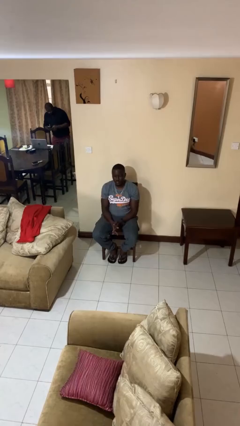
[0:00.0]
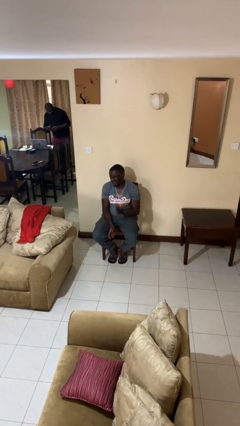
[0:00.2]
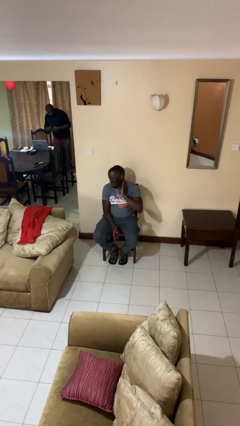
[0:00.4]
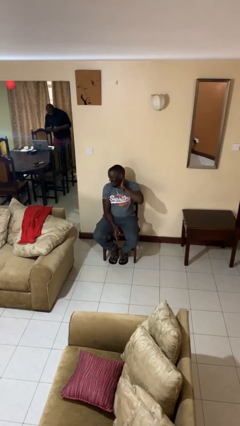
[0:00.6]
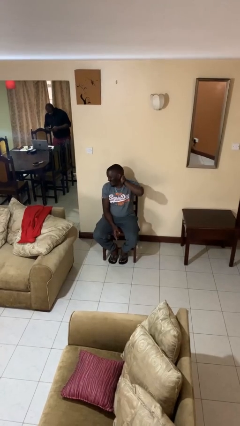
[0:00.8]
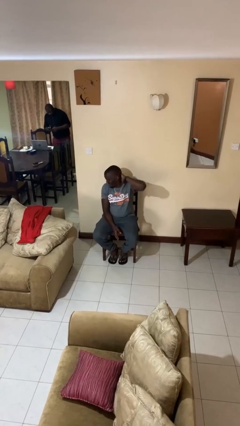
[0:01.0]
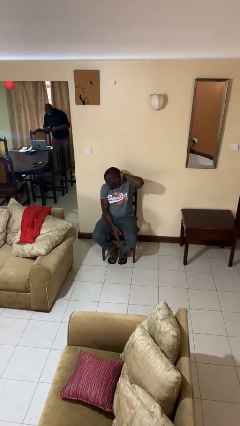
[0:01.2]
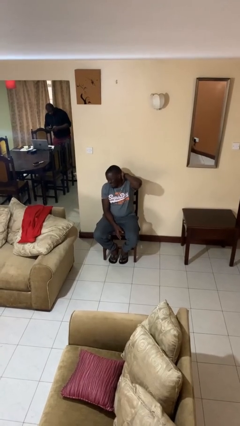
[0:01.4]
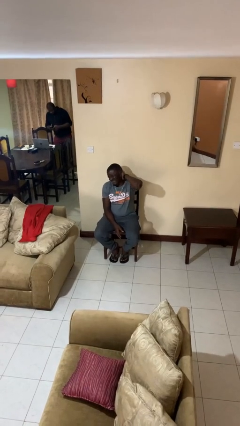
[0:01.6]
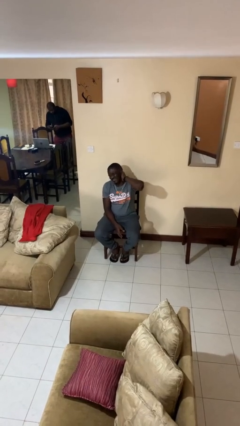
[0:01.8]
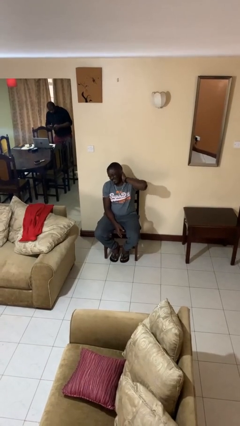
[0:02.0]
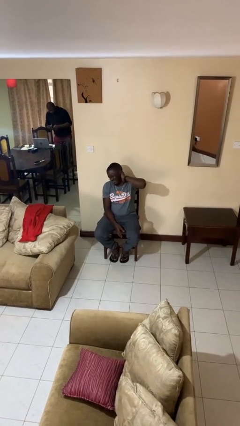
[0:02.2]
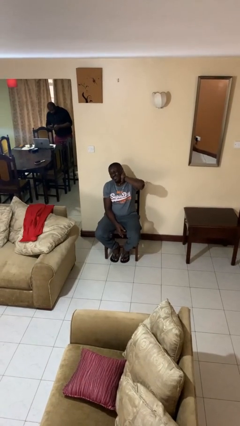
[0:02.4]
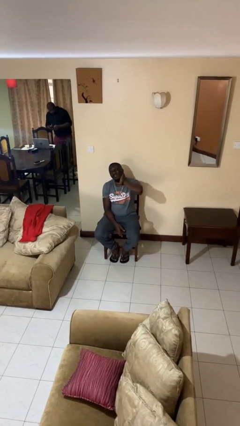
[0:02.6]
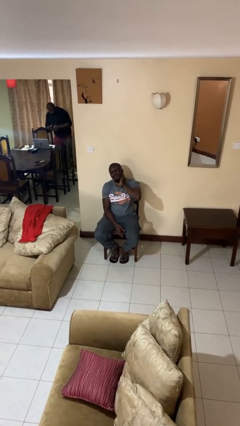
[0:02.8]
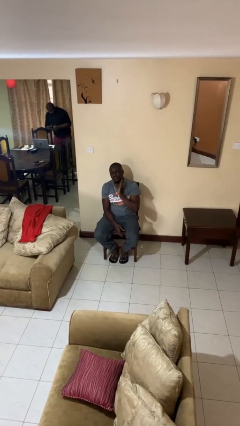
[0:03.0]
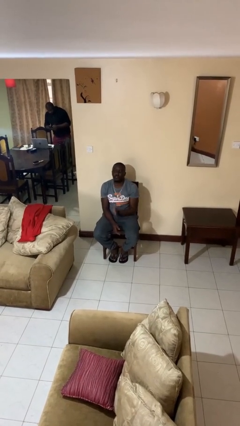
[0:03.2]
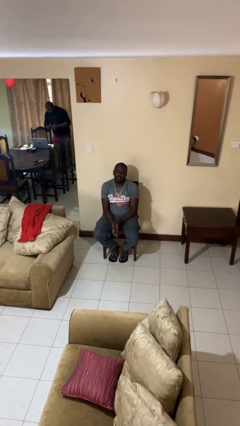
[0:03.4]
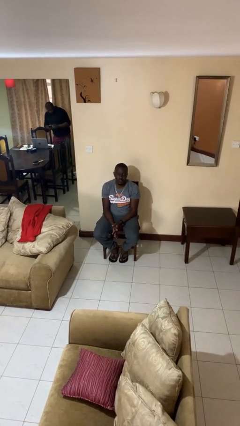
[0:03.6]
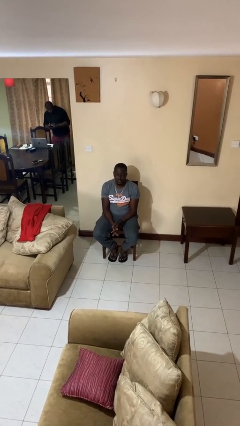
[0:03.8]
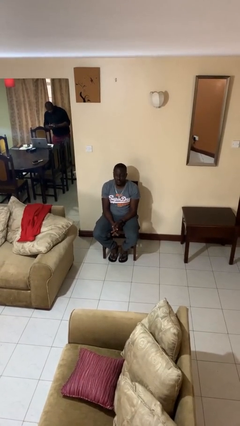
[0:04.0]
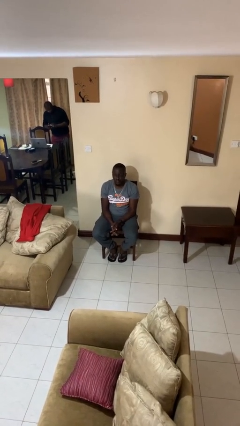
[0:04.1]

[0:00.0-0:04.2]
person rubs neck

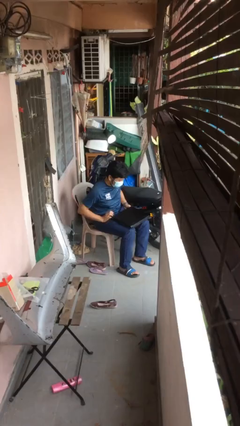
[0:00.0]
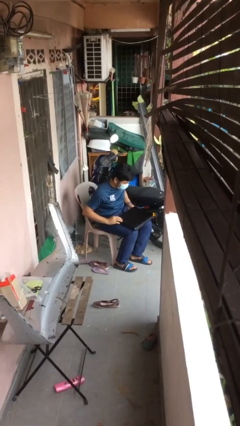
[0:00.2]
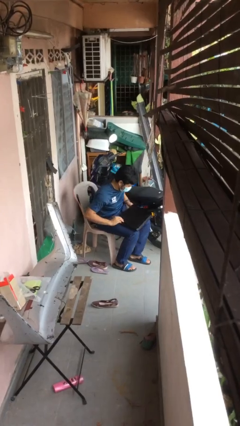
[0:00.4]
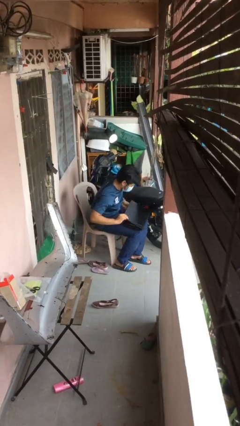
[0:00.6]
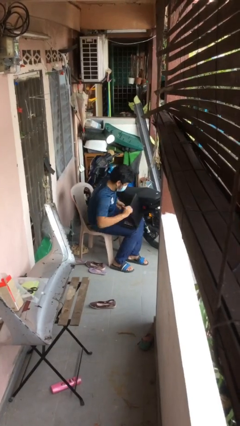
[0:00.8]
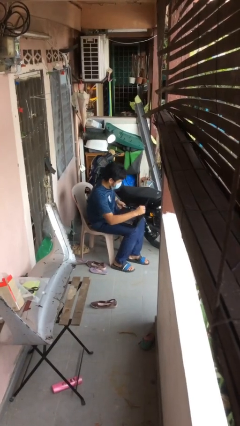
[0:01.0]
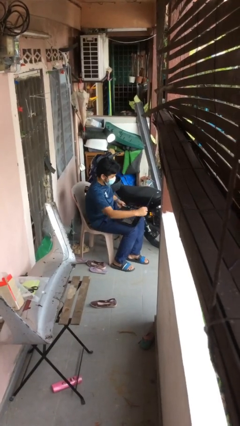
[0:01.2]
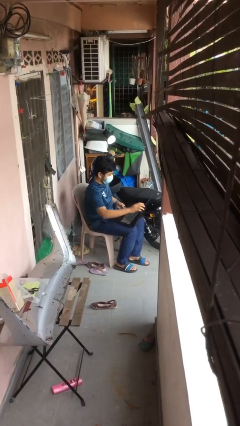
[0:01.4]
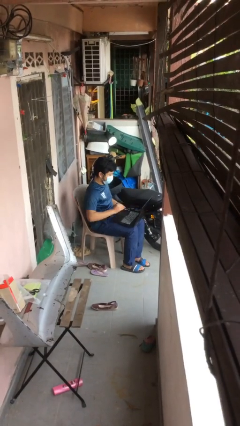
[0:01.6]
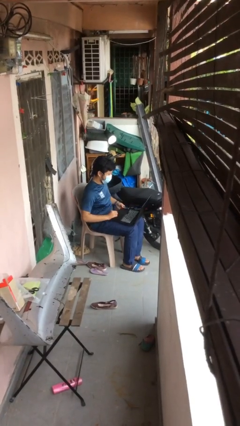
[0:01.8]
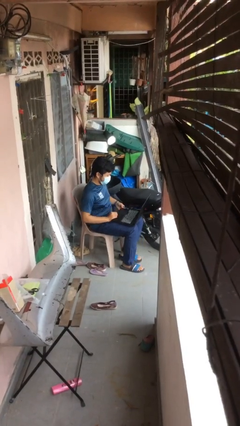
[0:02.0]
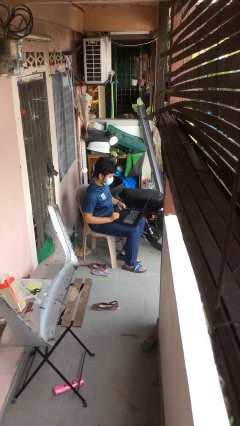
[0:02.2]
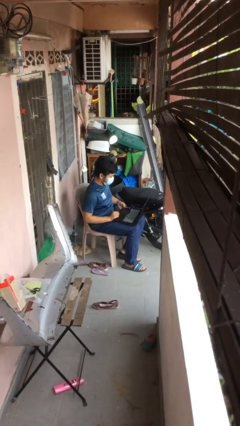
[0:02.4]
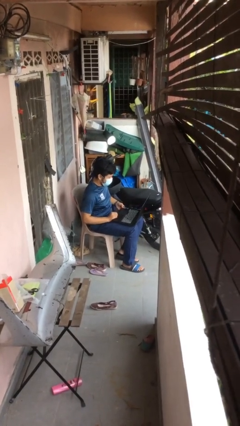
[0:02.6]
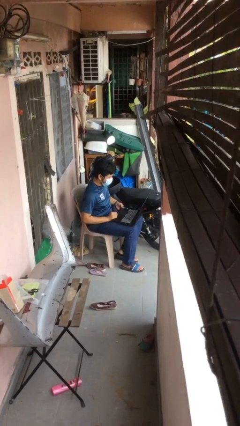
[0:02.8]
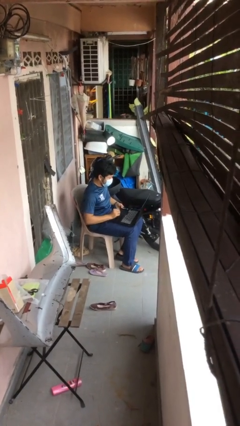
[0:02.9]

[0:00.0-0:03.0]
person opens laptop

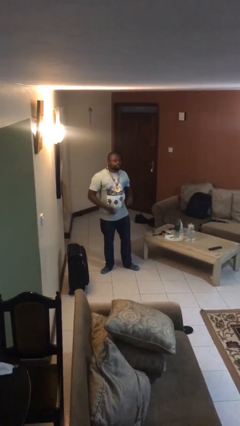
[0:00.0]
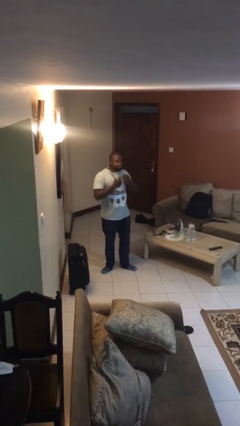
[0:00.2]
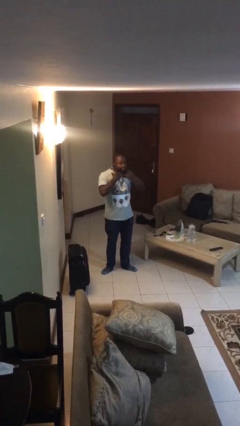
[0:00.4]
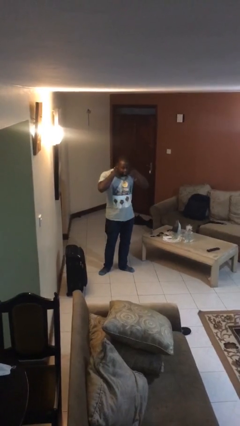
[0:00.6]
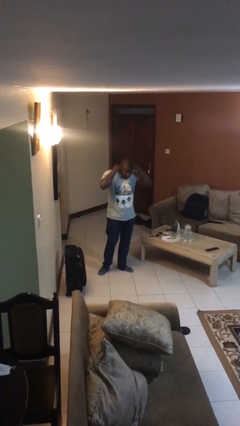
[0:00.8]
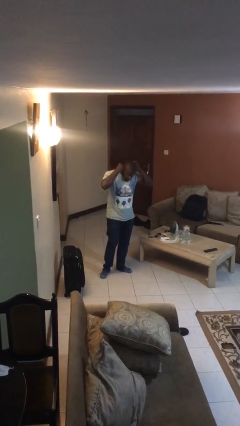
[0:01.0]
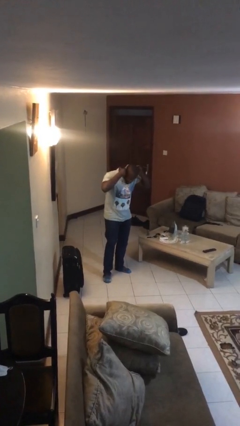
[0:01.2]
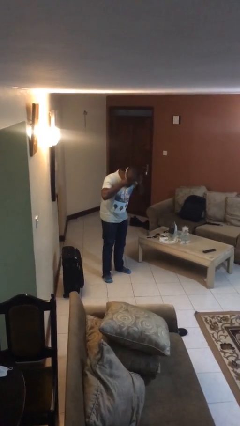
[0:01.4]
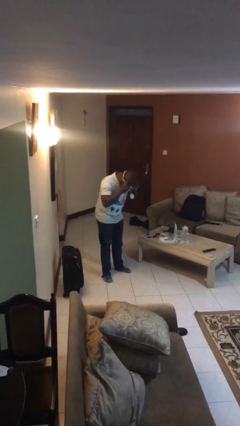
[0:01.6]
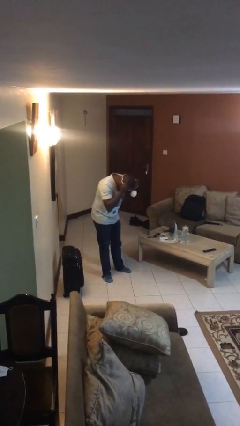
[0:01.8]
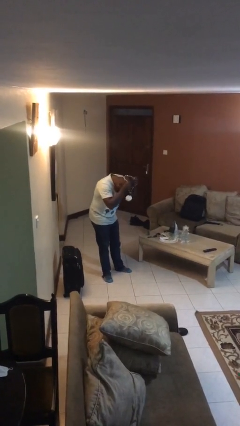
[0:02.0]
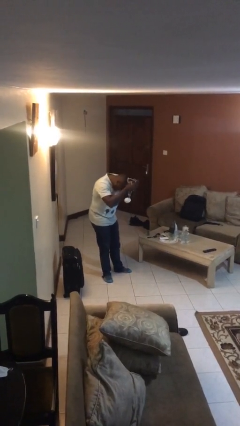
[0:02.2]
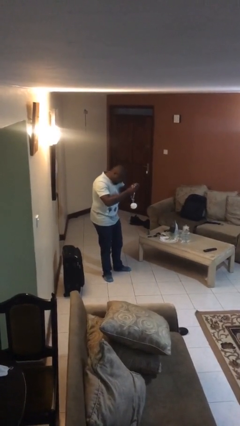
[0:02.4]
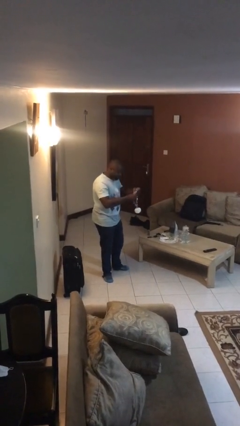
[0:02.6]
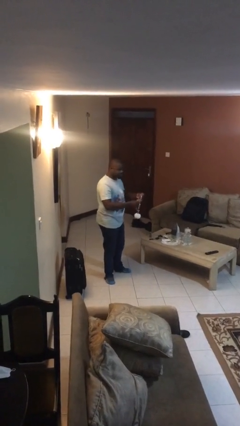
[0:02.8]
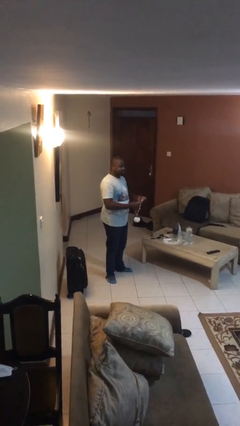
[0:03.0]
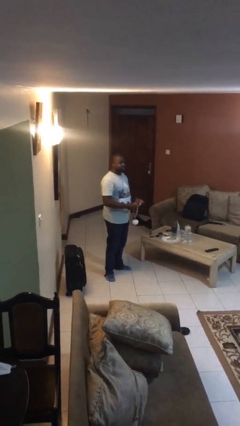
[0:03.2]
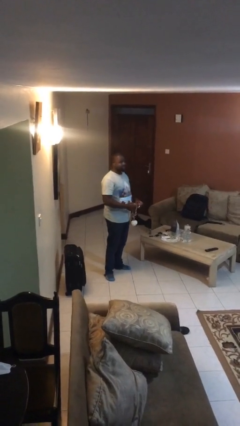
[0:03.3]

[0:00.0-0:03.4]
person takes off necklace

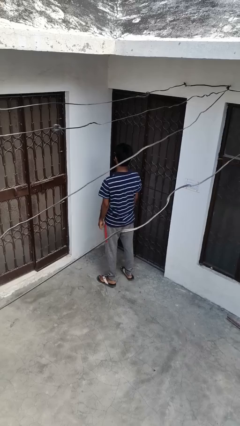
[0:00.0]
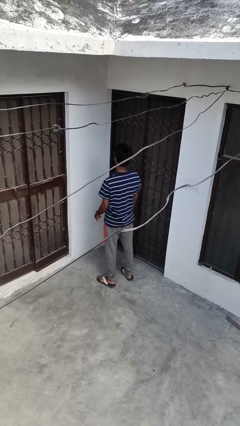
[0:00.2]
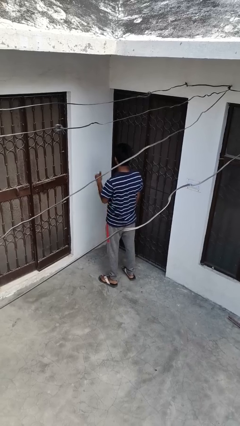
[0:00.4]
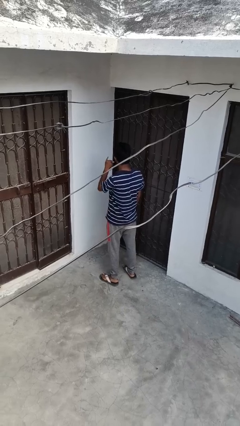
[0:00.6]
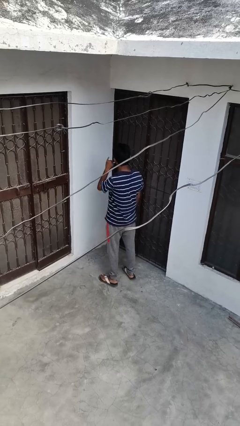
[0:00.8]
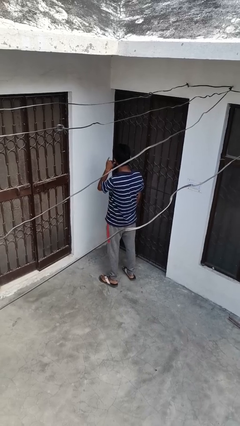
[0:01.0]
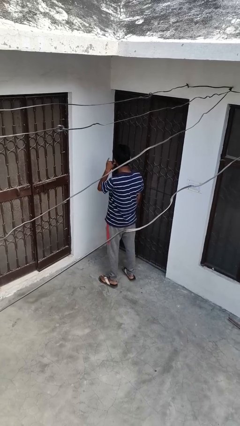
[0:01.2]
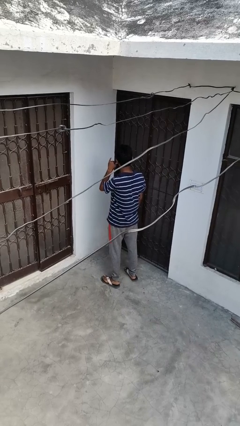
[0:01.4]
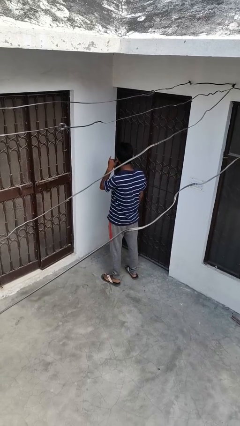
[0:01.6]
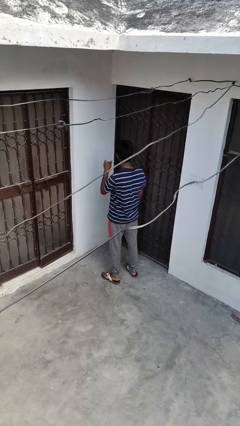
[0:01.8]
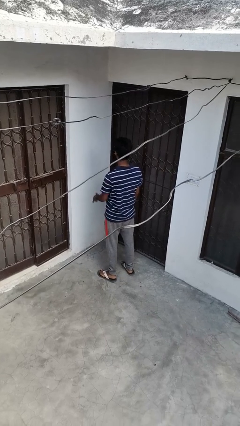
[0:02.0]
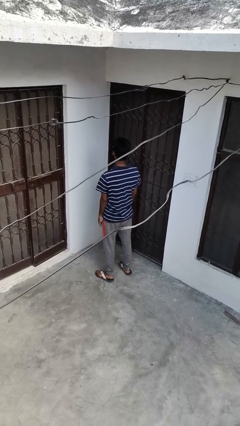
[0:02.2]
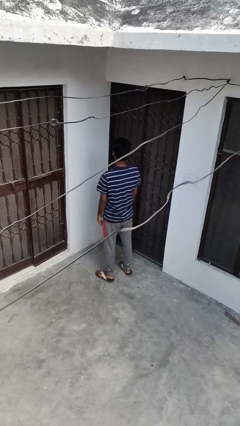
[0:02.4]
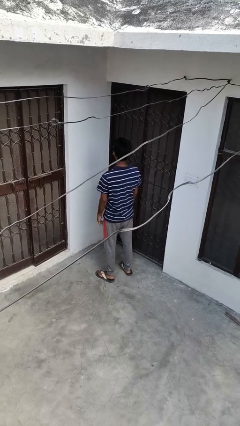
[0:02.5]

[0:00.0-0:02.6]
person gestures call me

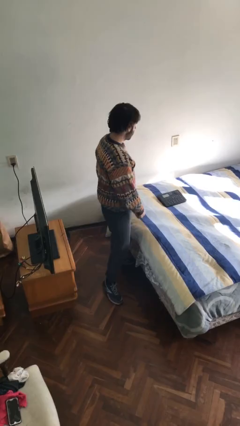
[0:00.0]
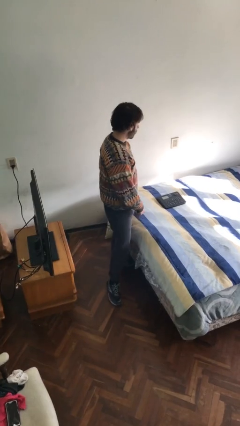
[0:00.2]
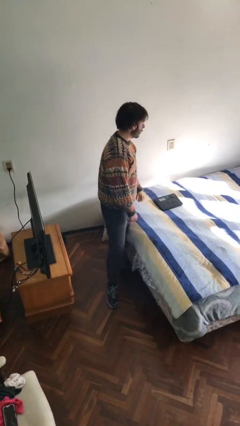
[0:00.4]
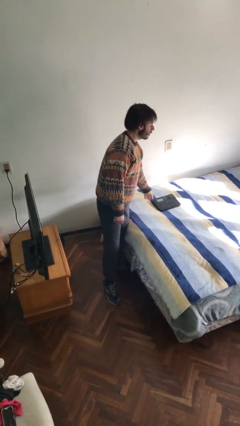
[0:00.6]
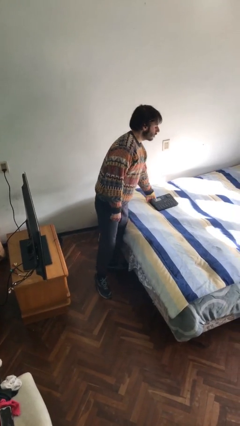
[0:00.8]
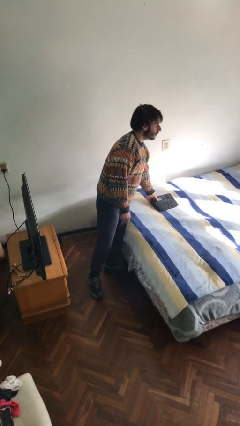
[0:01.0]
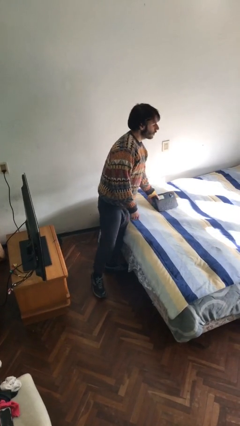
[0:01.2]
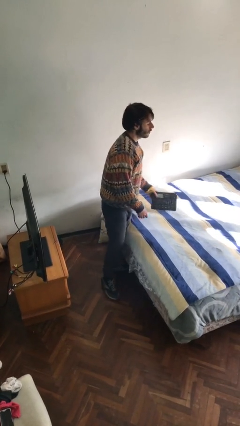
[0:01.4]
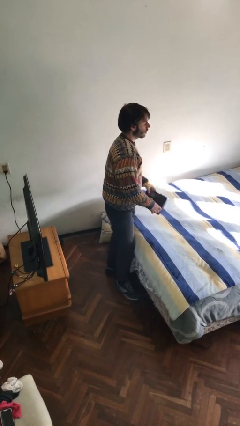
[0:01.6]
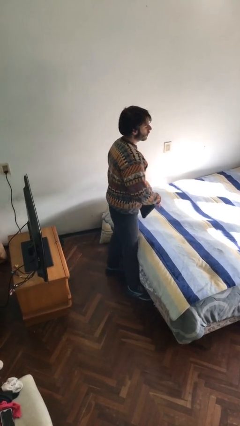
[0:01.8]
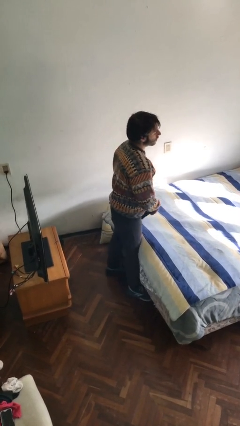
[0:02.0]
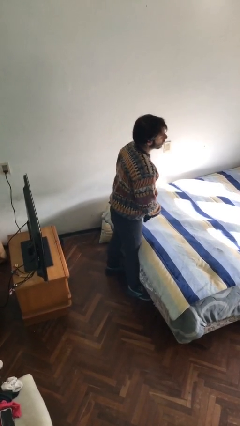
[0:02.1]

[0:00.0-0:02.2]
person picks up object from bed

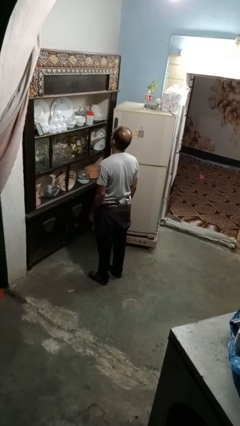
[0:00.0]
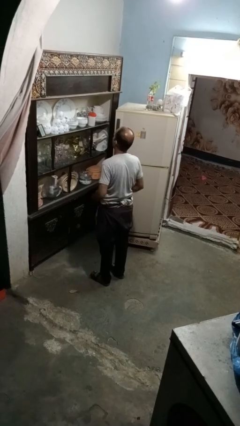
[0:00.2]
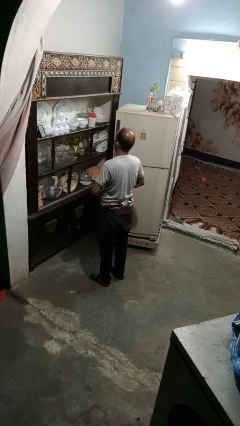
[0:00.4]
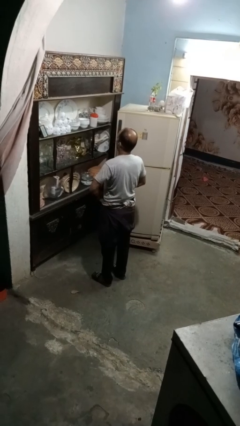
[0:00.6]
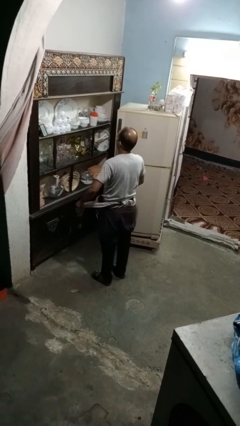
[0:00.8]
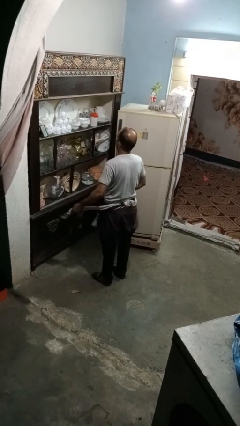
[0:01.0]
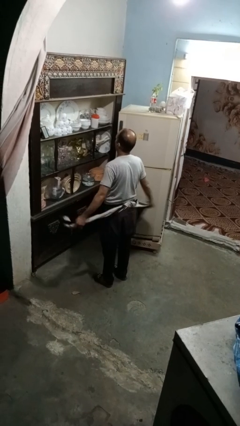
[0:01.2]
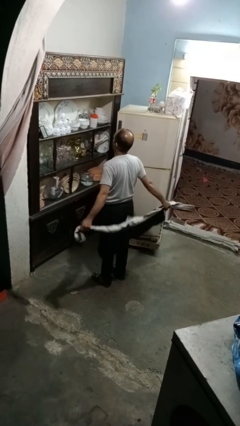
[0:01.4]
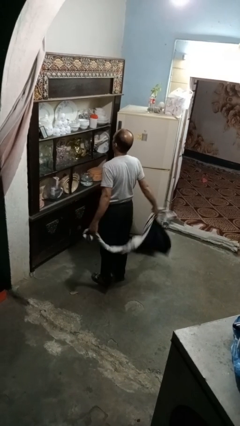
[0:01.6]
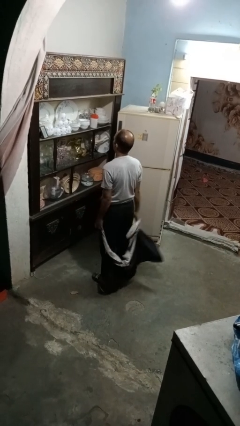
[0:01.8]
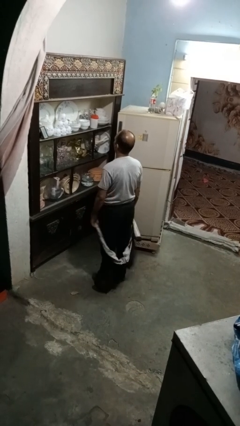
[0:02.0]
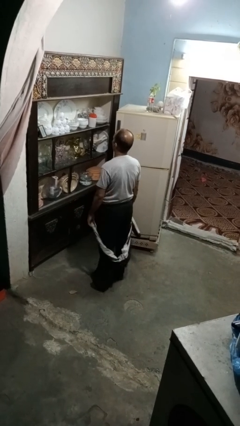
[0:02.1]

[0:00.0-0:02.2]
person unties jacket around waist
